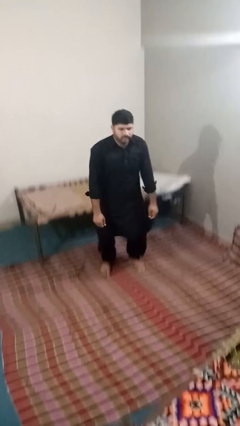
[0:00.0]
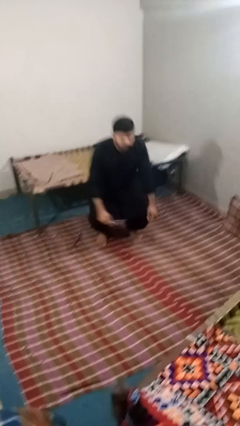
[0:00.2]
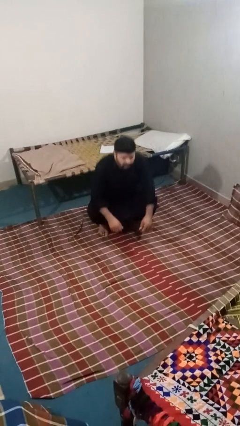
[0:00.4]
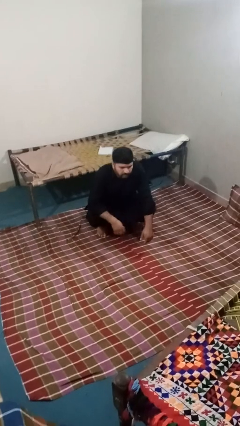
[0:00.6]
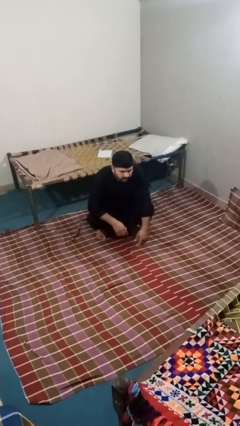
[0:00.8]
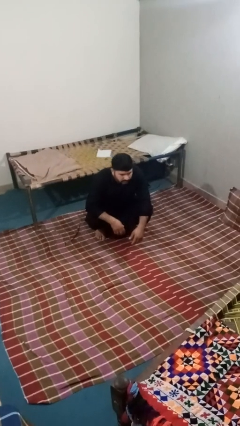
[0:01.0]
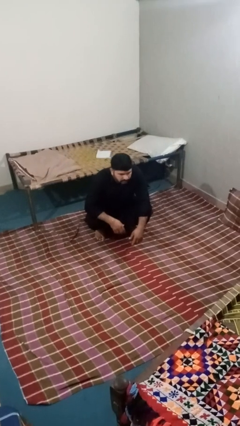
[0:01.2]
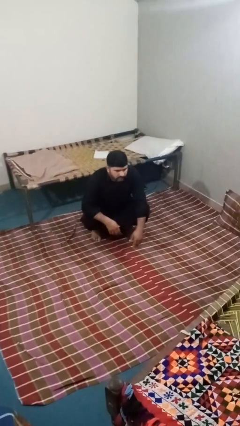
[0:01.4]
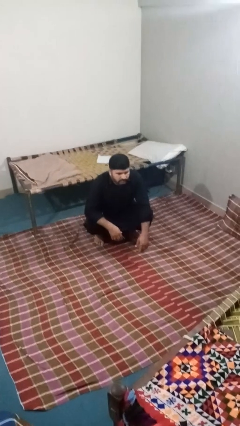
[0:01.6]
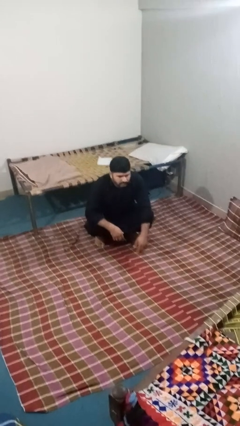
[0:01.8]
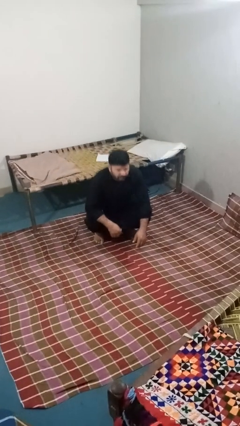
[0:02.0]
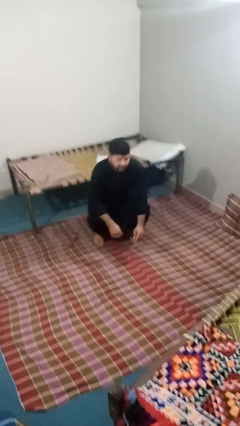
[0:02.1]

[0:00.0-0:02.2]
person squats

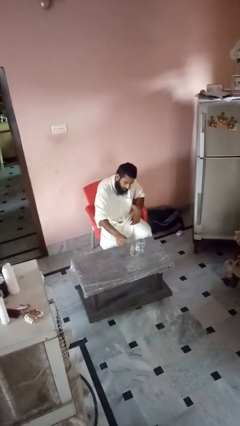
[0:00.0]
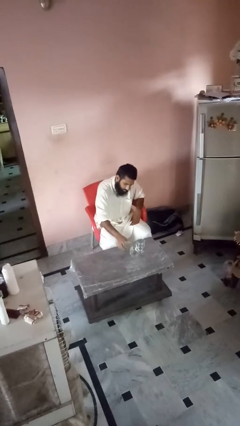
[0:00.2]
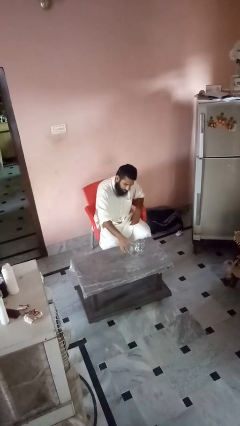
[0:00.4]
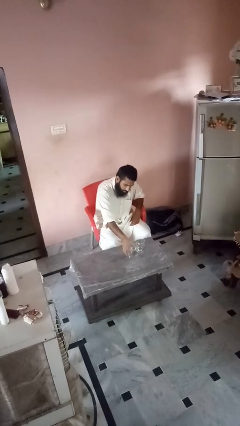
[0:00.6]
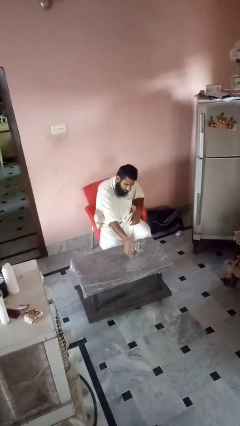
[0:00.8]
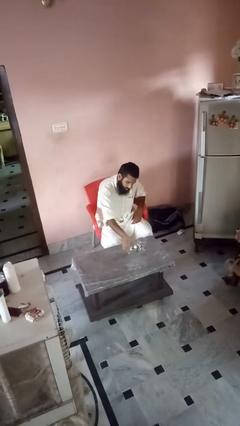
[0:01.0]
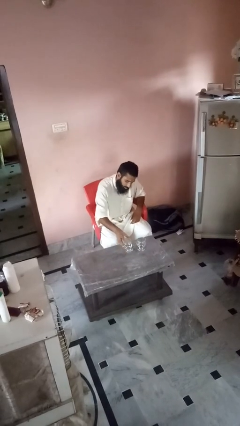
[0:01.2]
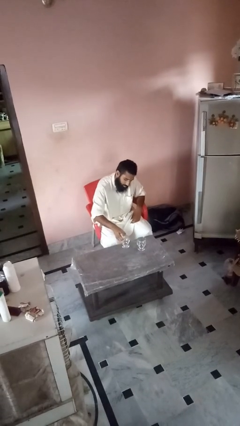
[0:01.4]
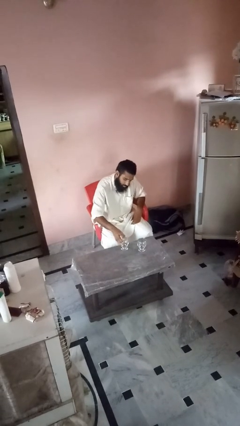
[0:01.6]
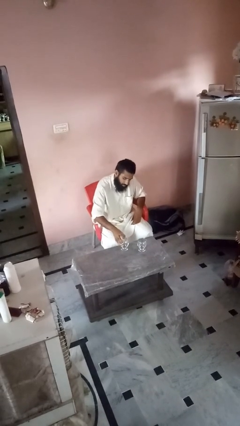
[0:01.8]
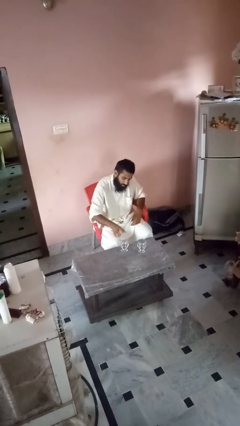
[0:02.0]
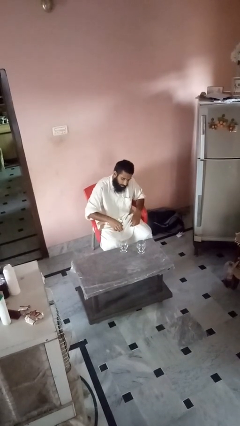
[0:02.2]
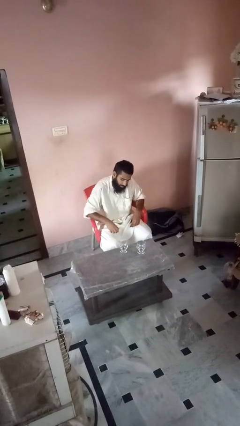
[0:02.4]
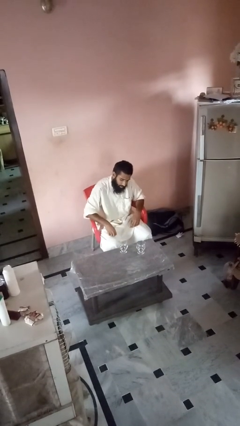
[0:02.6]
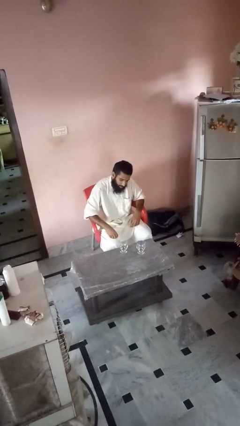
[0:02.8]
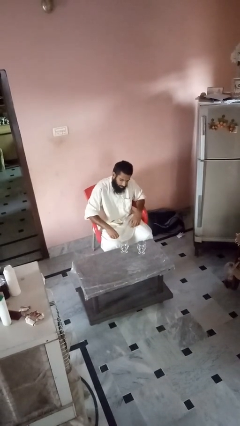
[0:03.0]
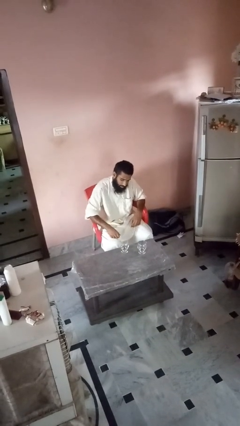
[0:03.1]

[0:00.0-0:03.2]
person sets upright glass

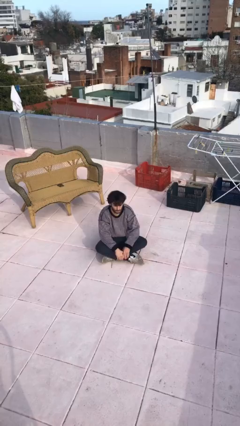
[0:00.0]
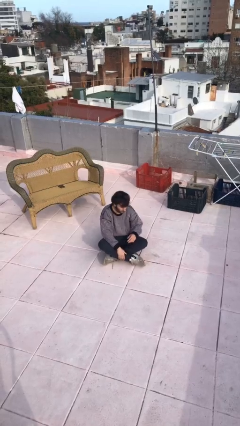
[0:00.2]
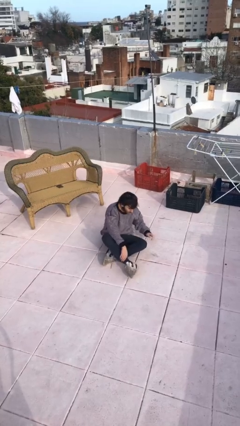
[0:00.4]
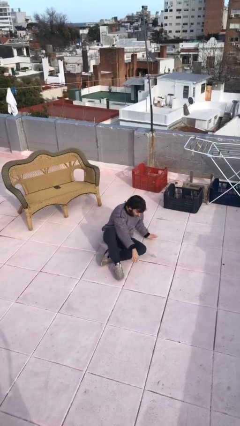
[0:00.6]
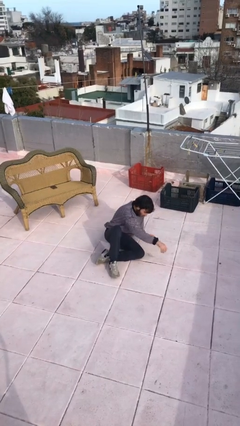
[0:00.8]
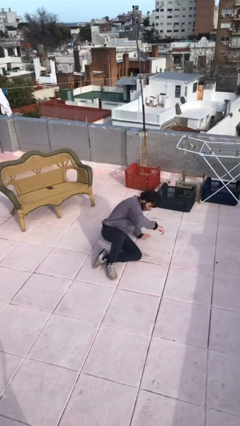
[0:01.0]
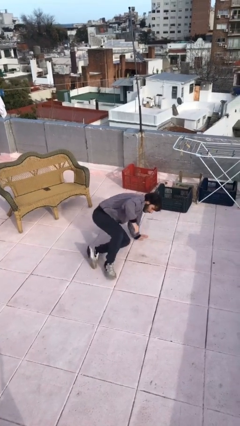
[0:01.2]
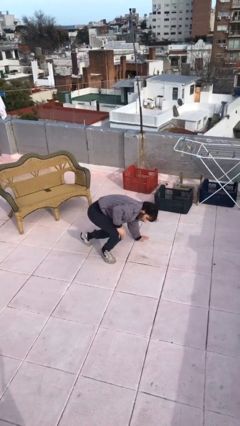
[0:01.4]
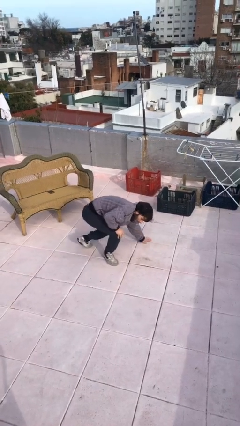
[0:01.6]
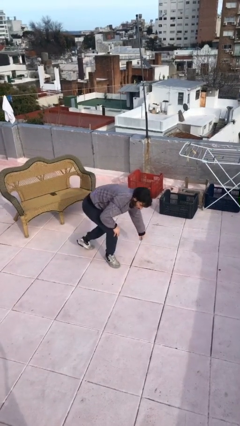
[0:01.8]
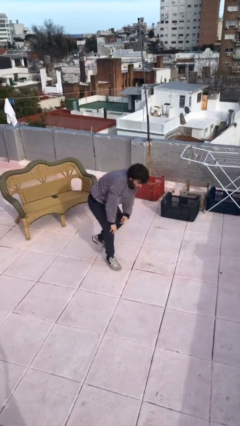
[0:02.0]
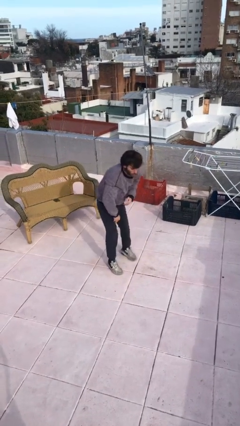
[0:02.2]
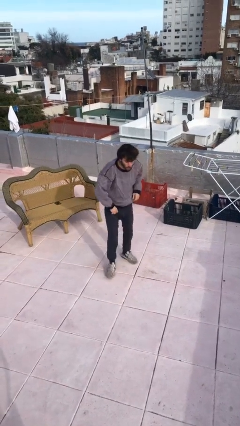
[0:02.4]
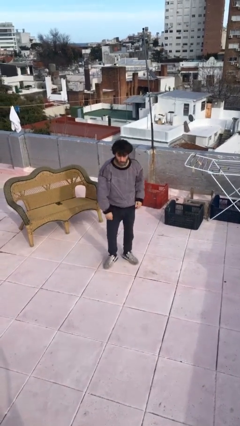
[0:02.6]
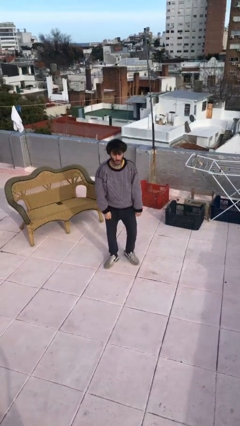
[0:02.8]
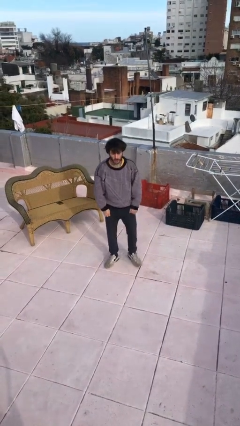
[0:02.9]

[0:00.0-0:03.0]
person stands up from floor

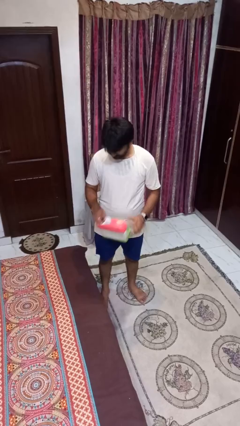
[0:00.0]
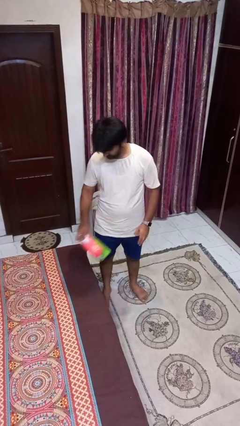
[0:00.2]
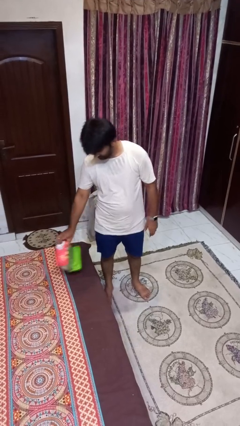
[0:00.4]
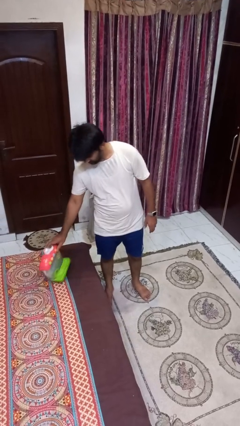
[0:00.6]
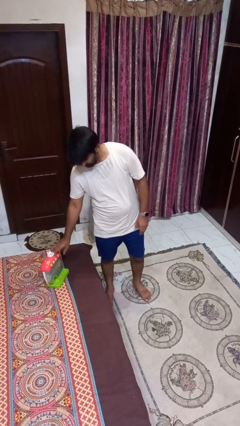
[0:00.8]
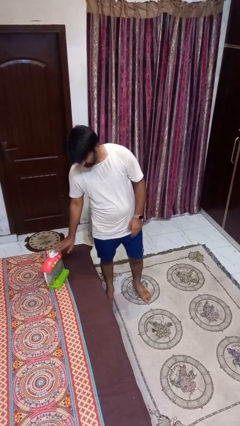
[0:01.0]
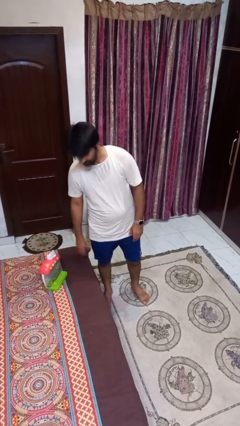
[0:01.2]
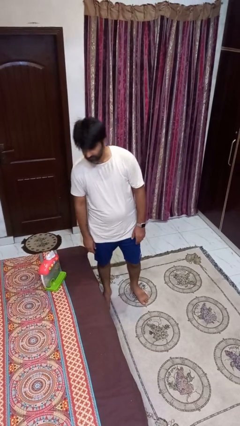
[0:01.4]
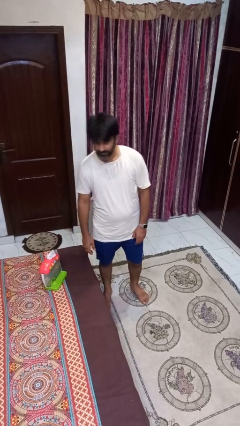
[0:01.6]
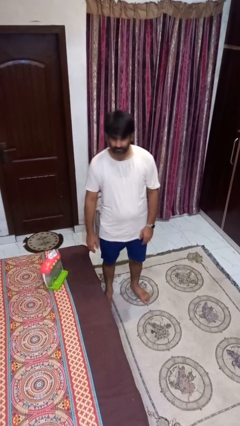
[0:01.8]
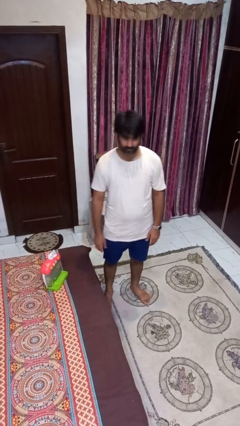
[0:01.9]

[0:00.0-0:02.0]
person puts down object on bed

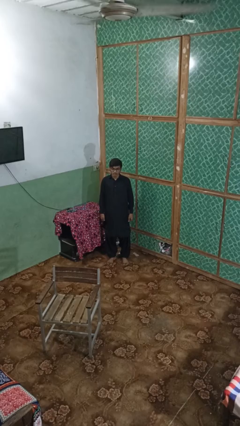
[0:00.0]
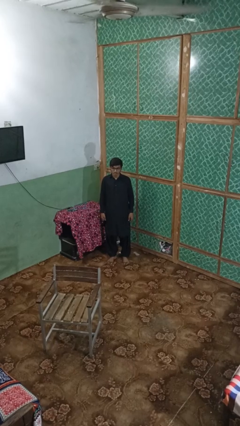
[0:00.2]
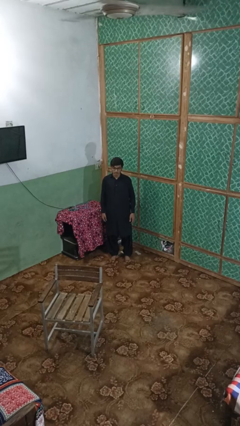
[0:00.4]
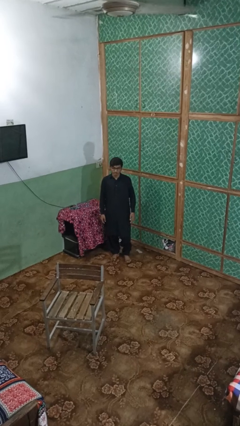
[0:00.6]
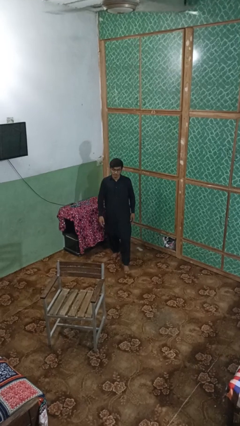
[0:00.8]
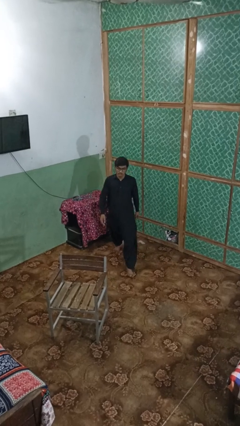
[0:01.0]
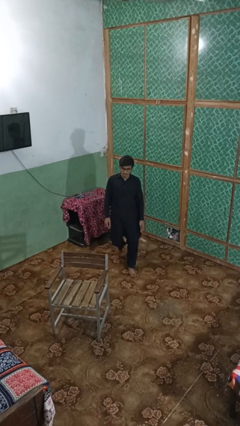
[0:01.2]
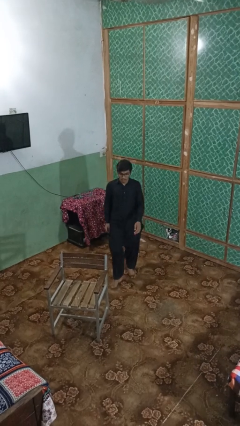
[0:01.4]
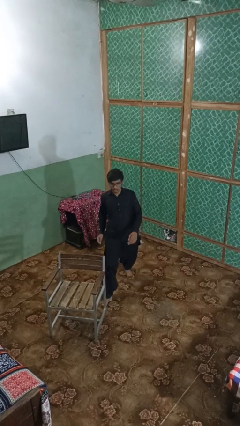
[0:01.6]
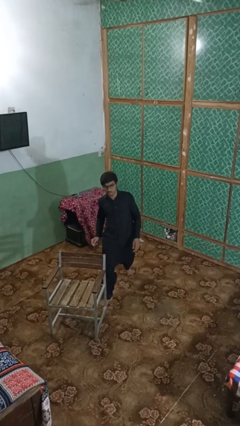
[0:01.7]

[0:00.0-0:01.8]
person trips on object on floor

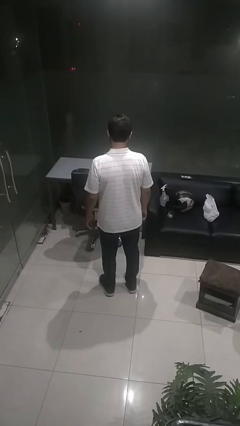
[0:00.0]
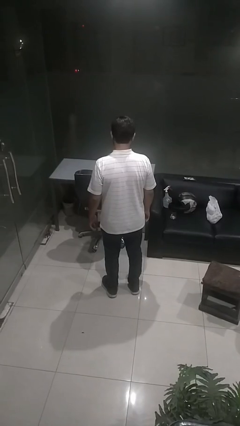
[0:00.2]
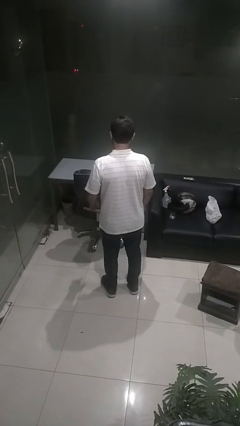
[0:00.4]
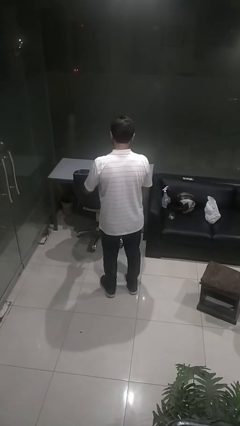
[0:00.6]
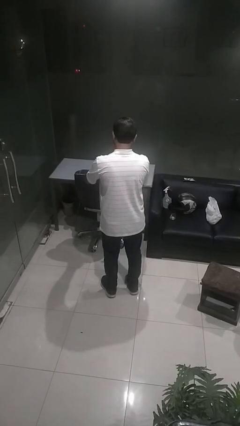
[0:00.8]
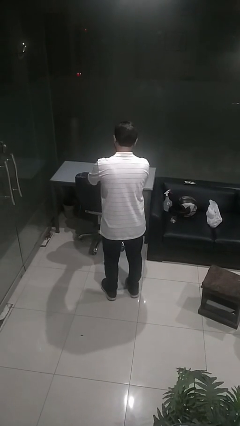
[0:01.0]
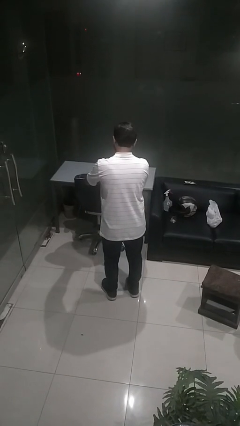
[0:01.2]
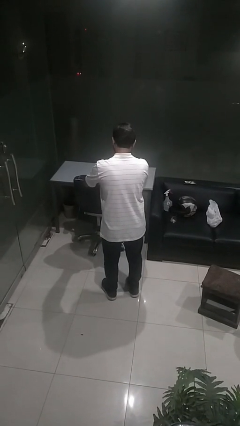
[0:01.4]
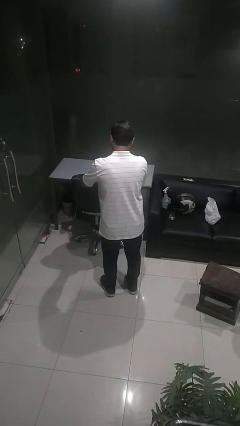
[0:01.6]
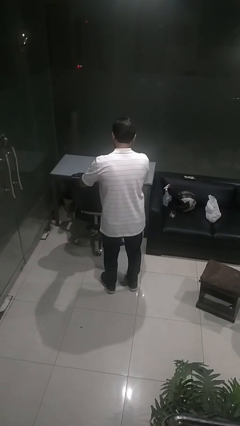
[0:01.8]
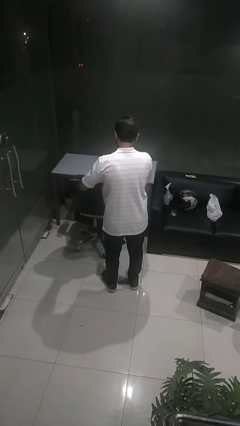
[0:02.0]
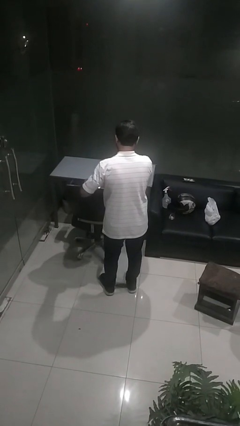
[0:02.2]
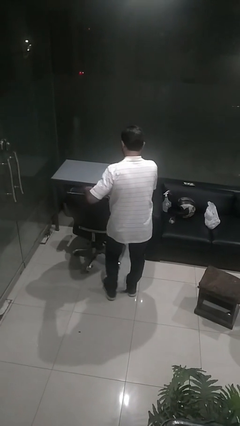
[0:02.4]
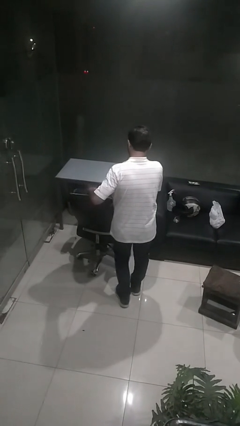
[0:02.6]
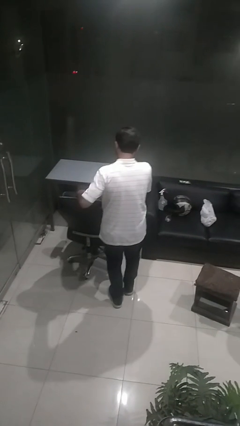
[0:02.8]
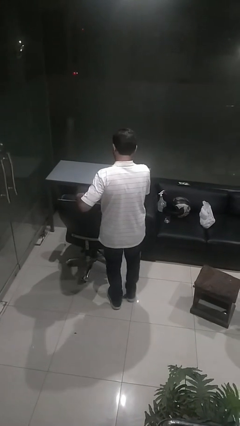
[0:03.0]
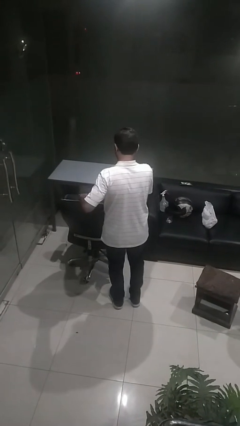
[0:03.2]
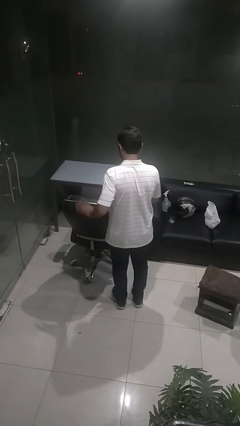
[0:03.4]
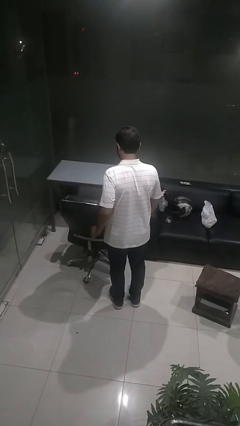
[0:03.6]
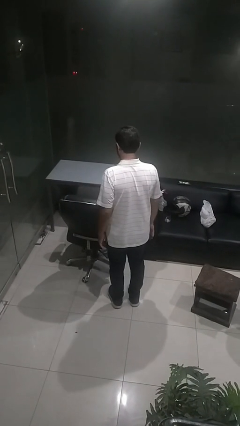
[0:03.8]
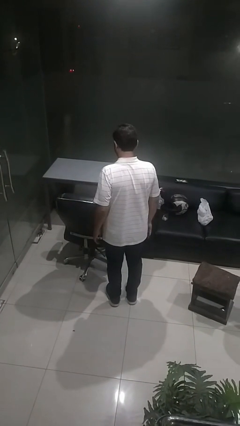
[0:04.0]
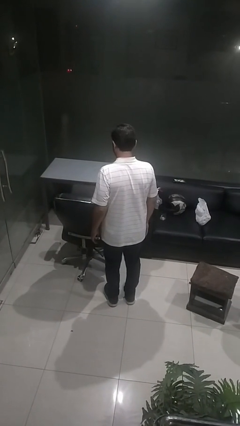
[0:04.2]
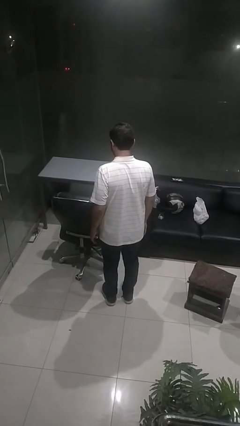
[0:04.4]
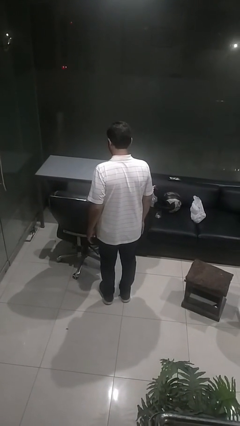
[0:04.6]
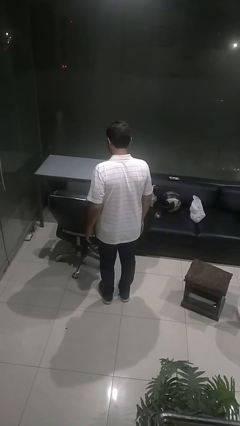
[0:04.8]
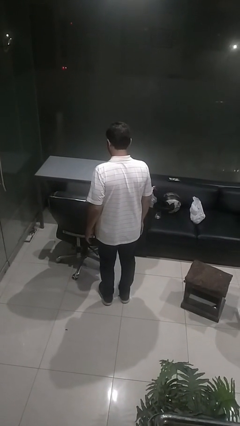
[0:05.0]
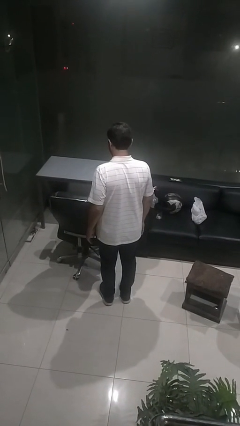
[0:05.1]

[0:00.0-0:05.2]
person pulls out chair

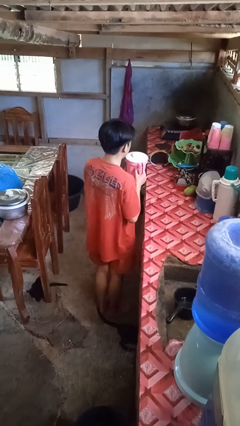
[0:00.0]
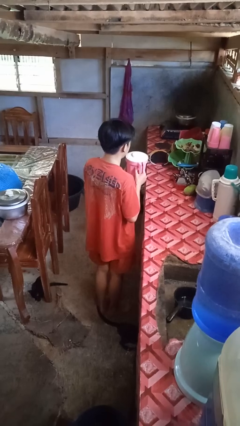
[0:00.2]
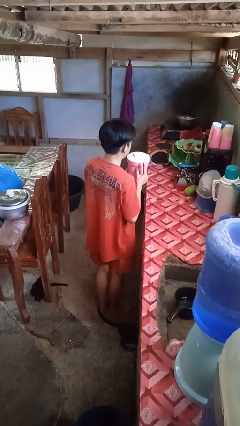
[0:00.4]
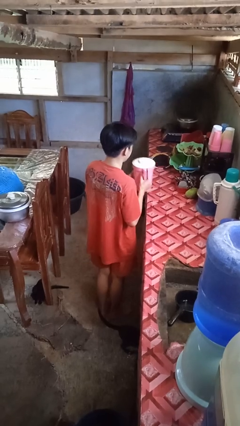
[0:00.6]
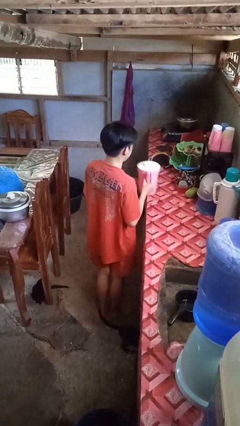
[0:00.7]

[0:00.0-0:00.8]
person puts down object on countertop
